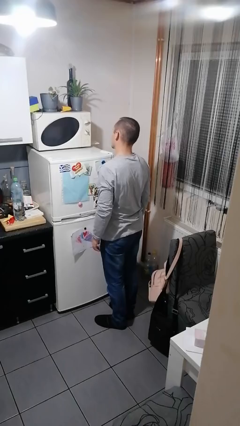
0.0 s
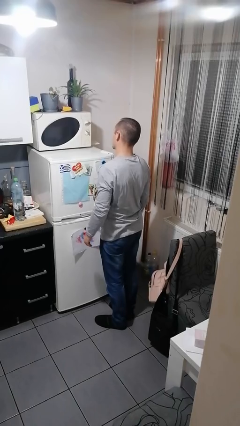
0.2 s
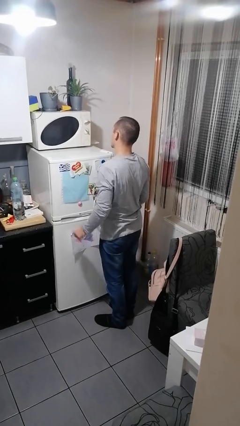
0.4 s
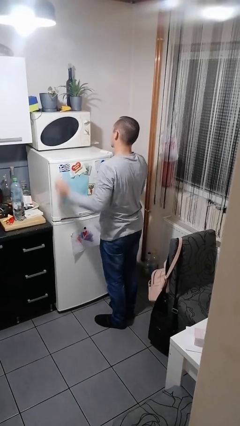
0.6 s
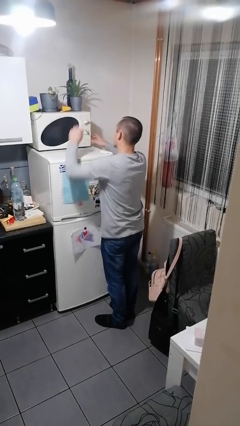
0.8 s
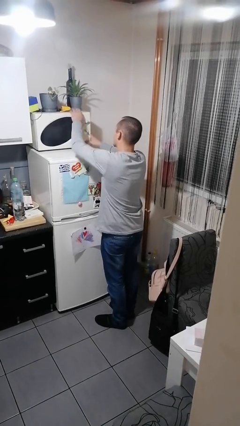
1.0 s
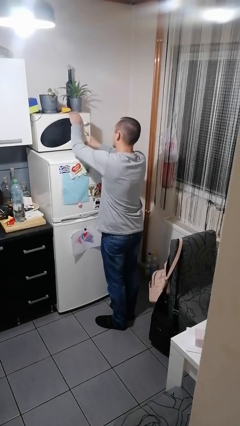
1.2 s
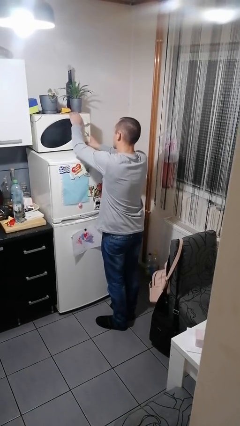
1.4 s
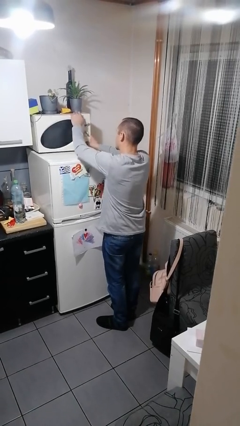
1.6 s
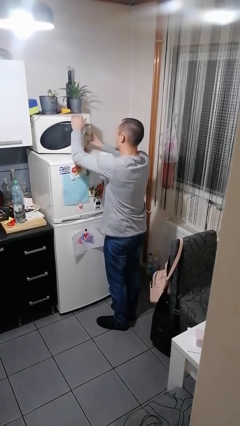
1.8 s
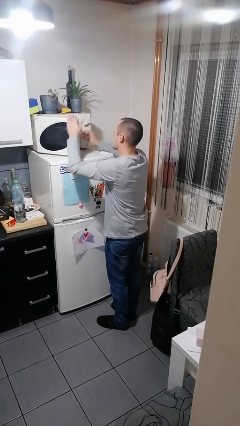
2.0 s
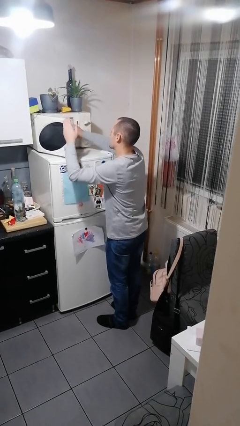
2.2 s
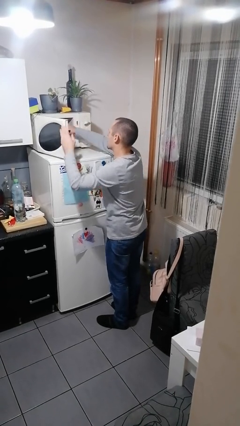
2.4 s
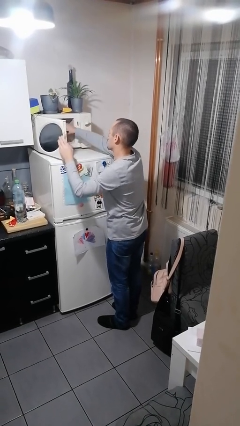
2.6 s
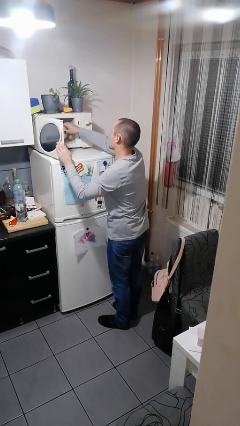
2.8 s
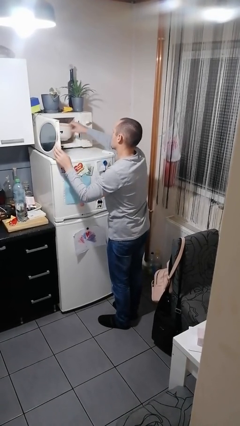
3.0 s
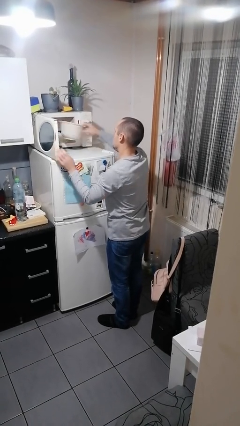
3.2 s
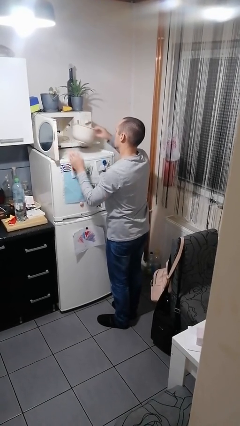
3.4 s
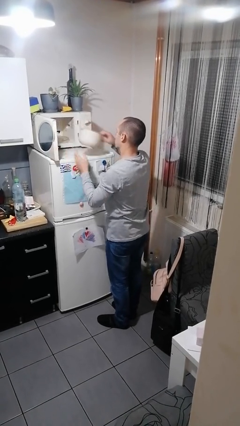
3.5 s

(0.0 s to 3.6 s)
person takes object from microwave

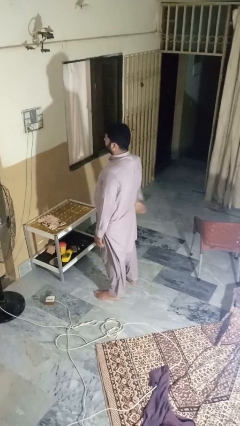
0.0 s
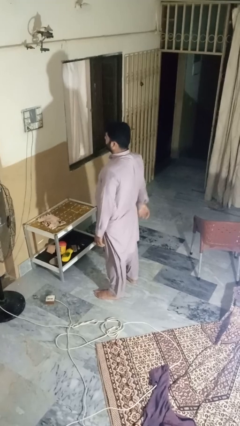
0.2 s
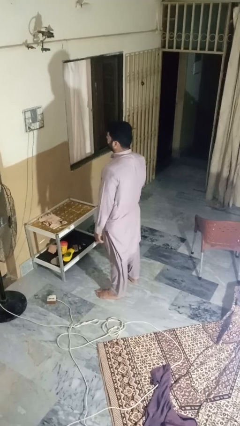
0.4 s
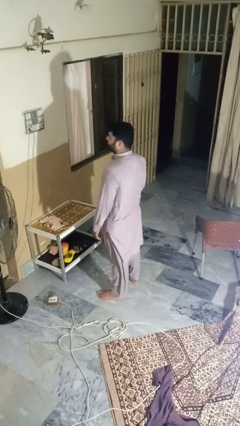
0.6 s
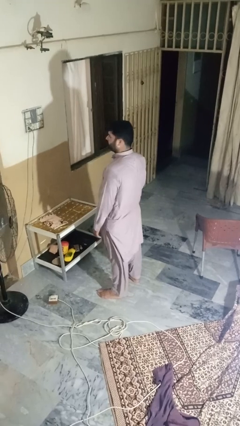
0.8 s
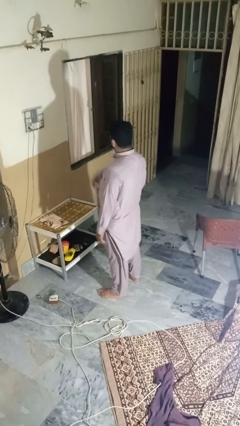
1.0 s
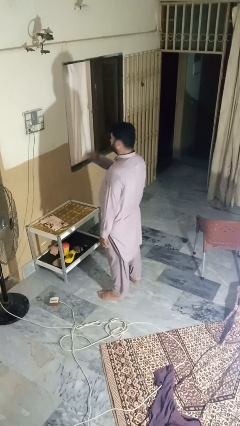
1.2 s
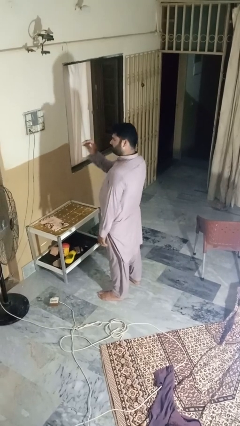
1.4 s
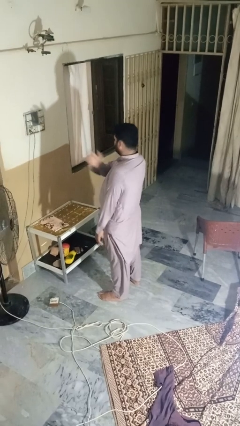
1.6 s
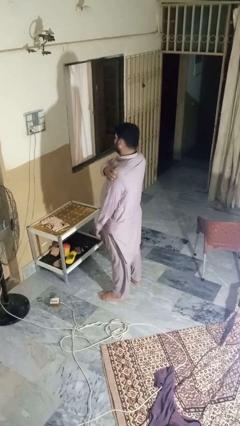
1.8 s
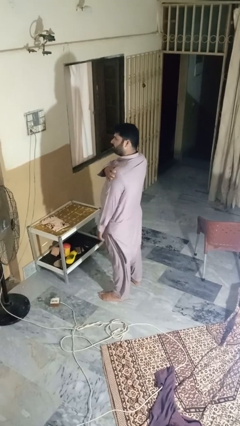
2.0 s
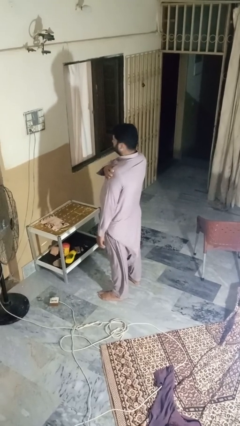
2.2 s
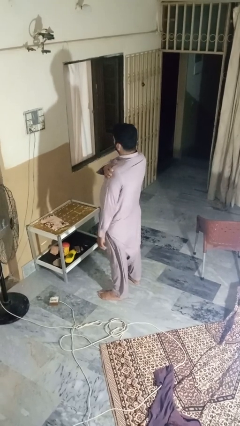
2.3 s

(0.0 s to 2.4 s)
person shrugs

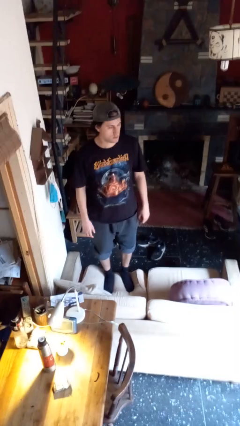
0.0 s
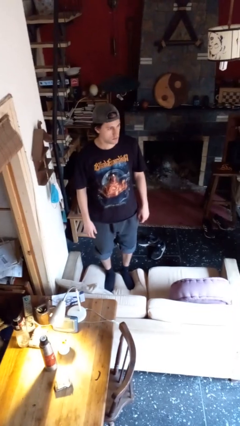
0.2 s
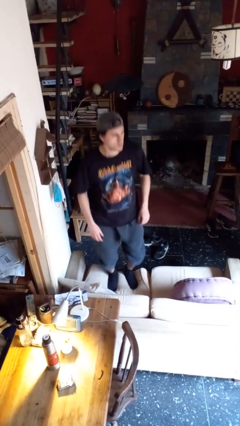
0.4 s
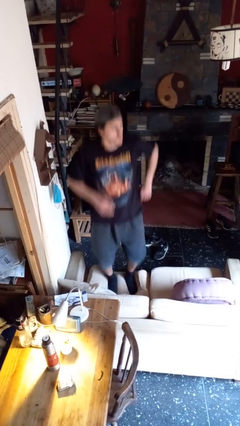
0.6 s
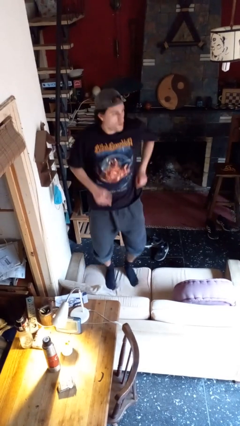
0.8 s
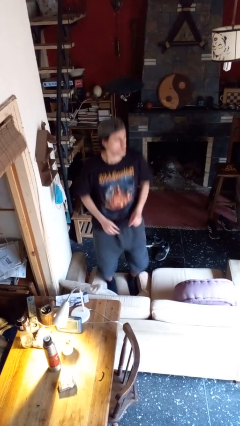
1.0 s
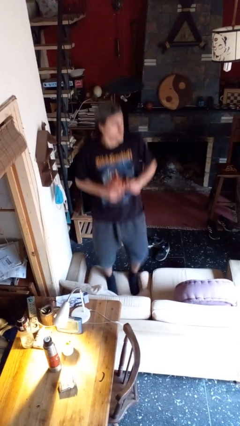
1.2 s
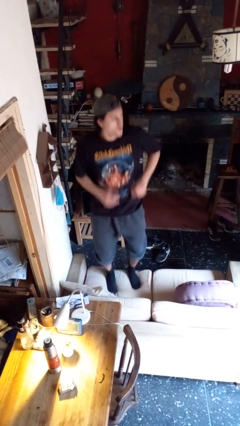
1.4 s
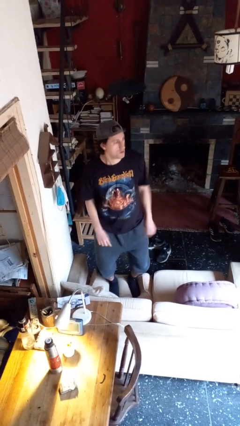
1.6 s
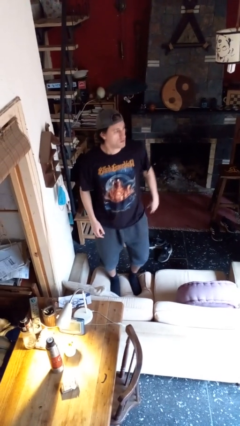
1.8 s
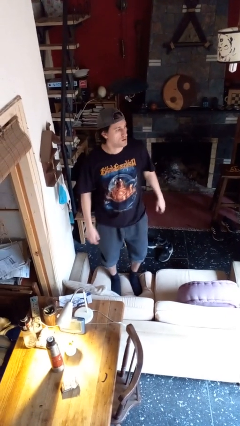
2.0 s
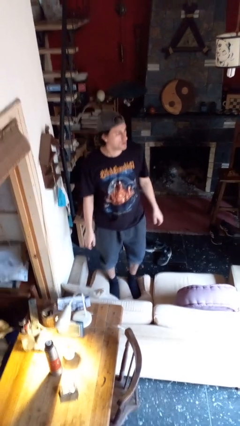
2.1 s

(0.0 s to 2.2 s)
person jumps on couch

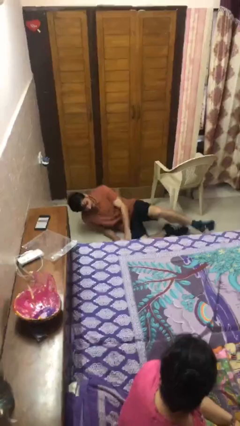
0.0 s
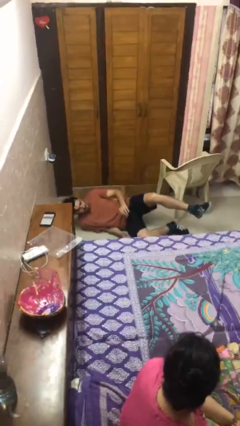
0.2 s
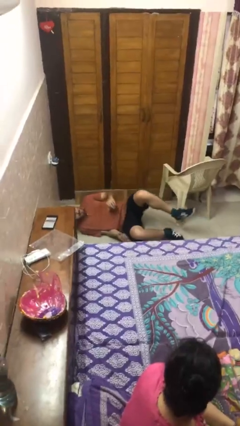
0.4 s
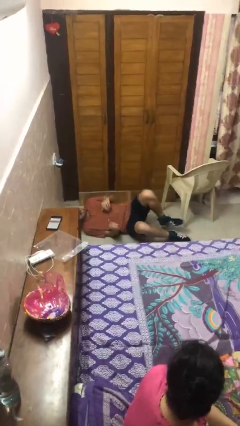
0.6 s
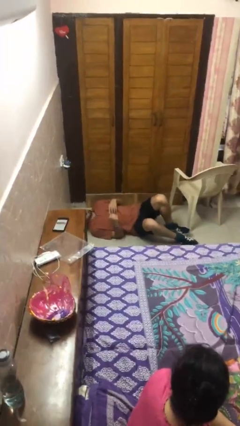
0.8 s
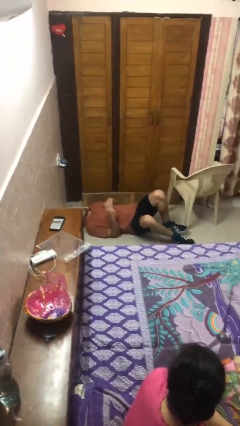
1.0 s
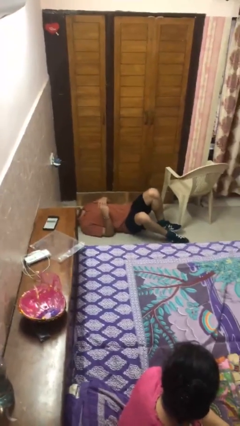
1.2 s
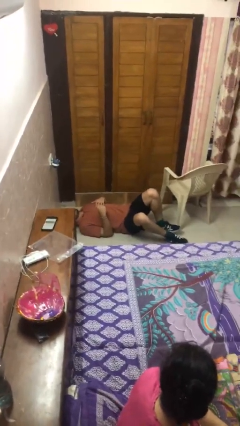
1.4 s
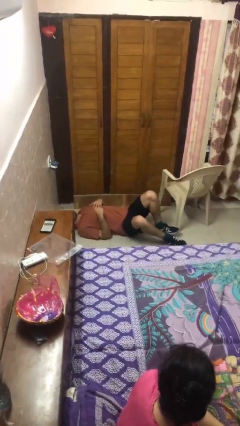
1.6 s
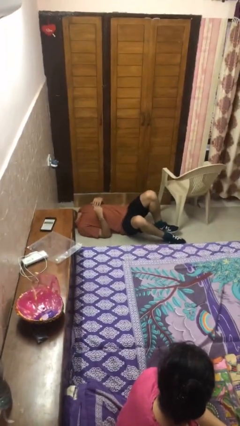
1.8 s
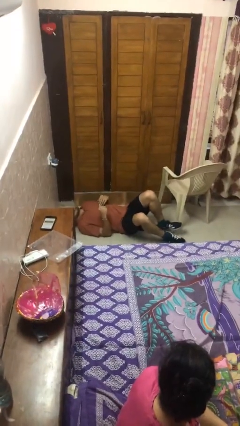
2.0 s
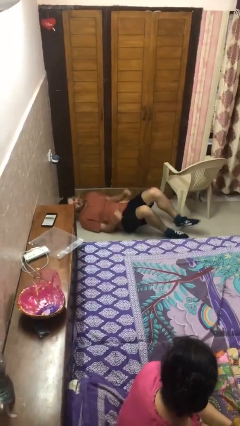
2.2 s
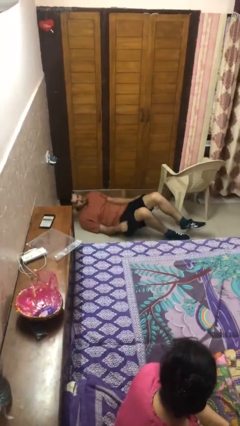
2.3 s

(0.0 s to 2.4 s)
person lies down on floor

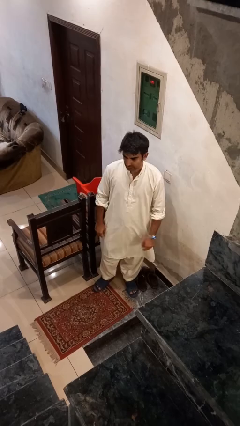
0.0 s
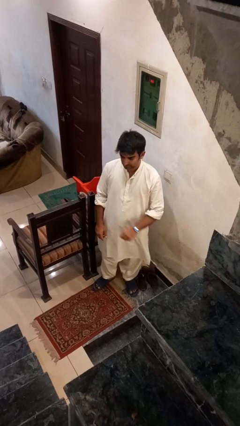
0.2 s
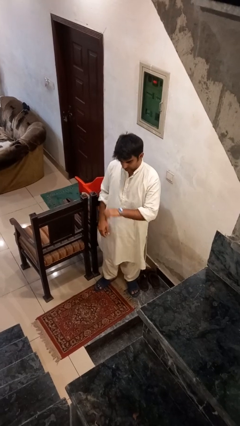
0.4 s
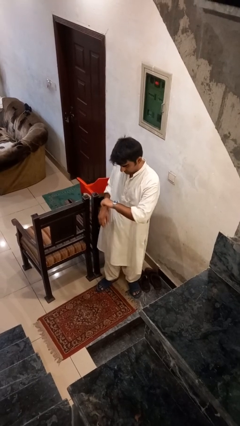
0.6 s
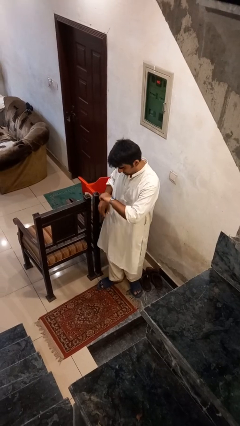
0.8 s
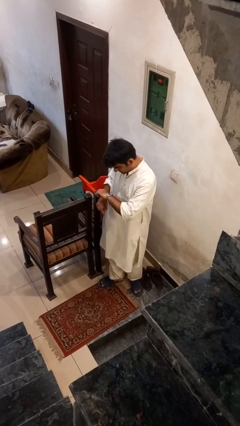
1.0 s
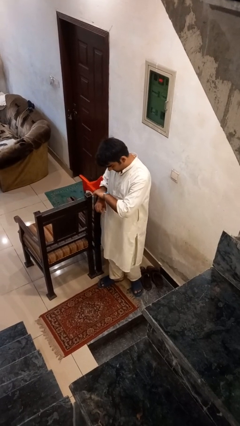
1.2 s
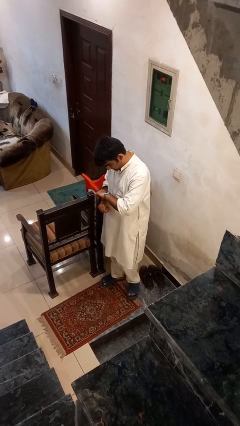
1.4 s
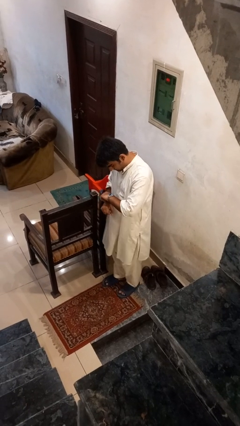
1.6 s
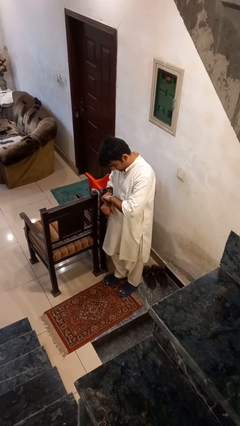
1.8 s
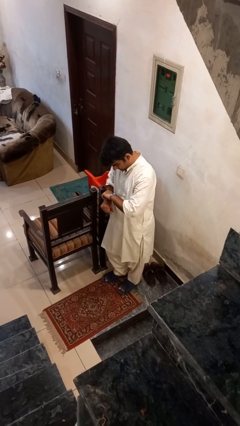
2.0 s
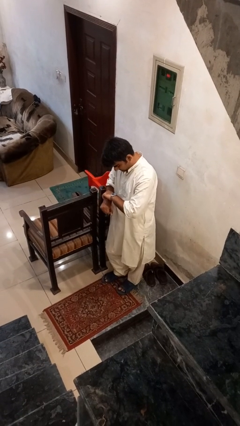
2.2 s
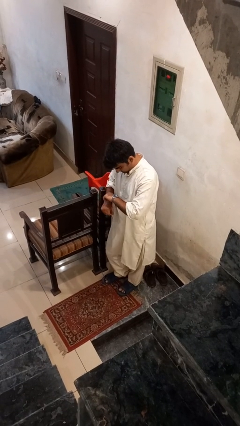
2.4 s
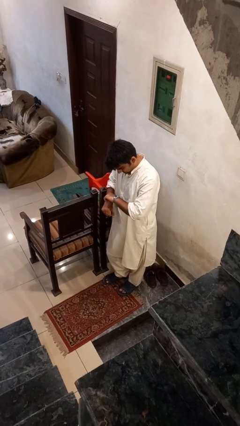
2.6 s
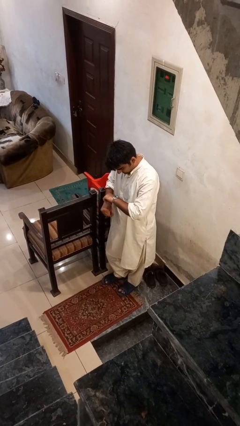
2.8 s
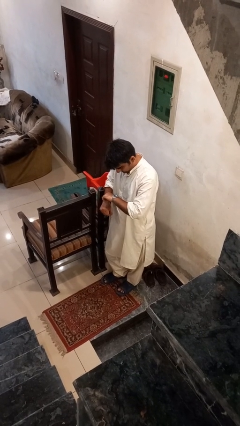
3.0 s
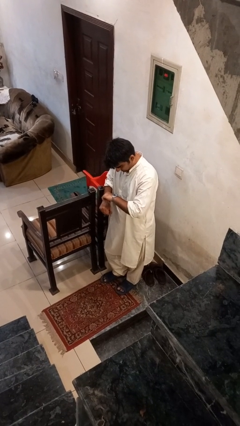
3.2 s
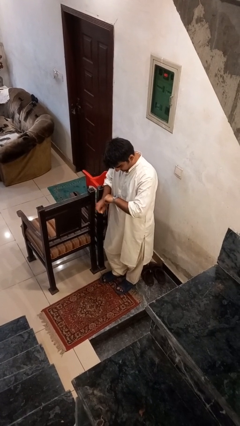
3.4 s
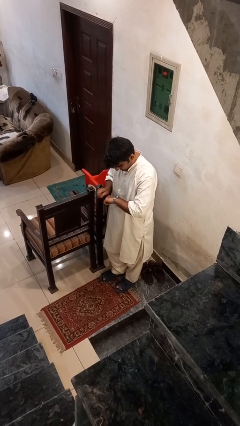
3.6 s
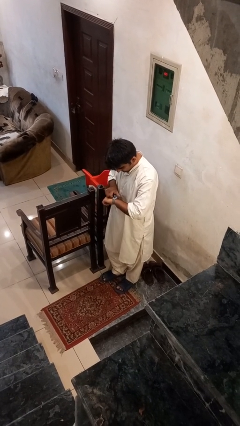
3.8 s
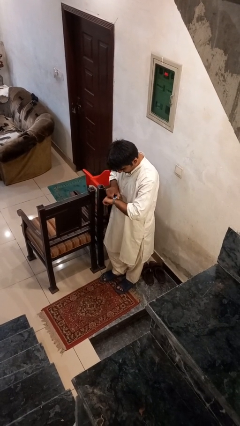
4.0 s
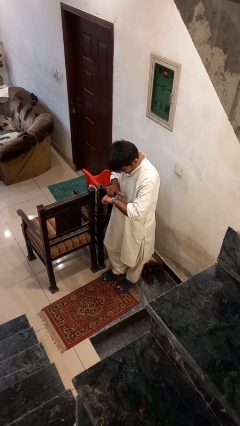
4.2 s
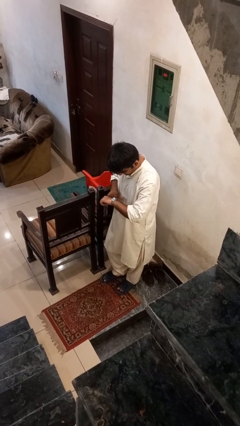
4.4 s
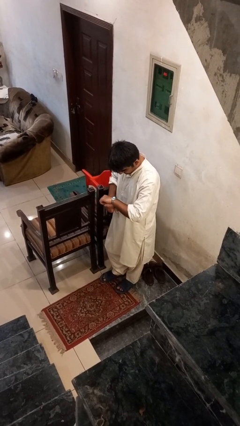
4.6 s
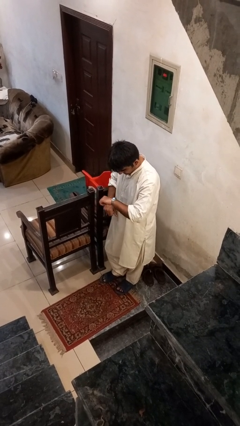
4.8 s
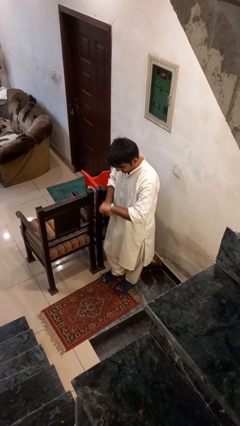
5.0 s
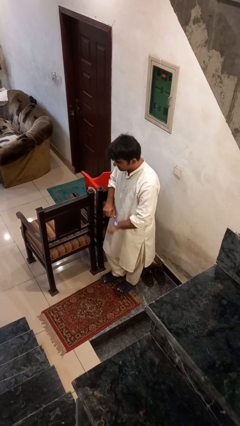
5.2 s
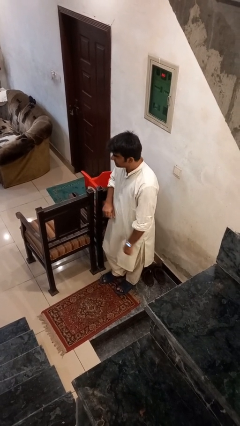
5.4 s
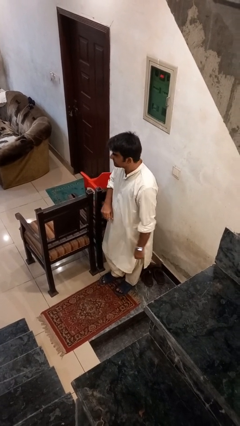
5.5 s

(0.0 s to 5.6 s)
person looks at wristwatch

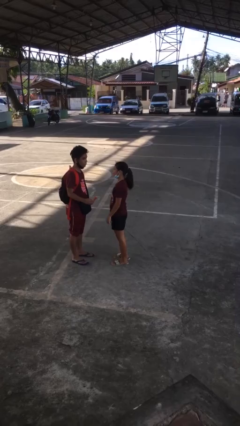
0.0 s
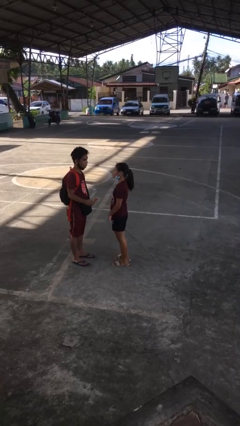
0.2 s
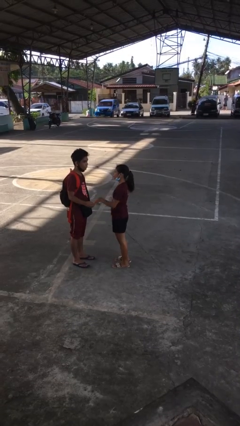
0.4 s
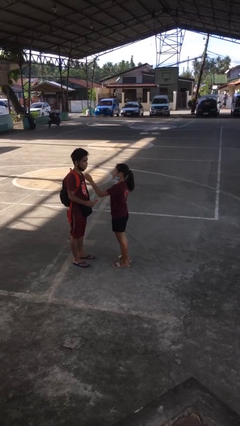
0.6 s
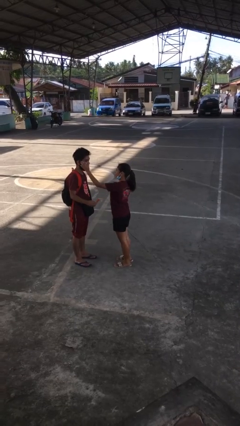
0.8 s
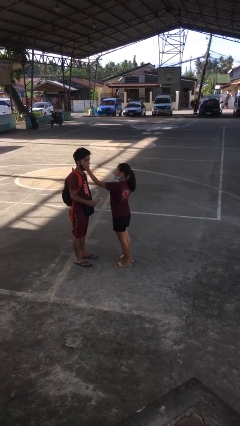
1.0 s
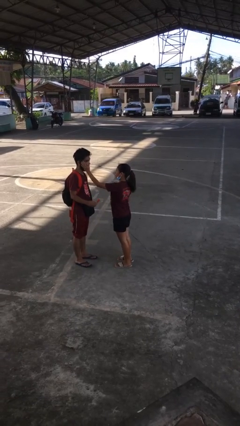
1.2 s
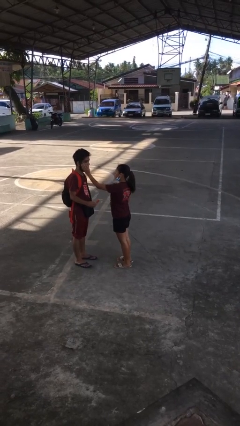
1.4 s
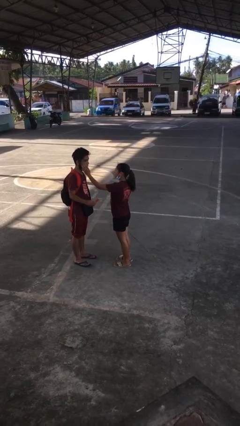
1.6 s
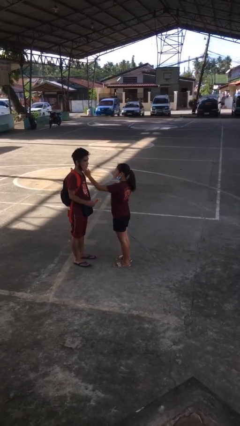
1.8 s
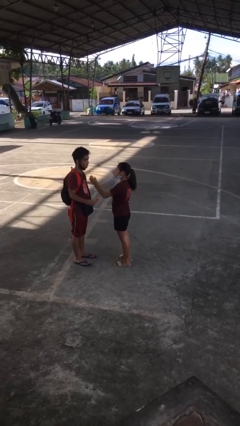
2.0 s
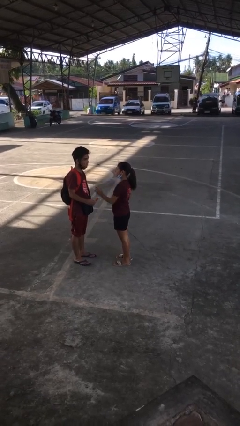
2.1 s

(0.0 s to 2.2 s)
person touches face of person
